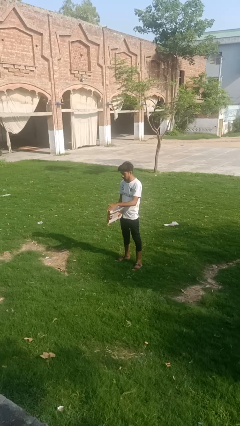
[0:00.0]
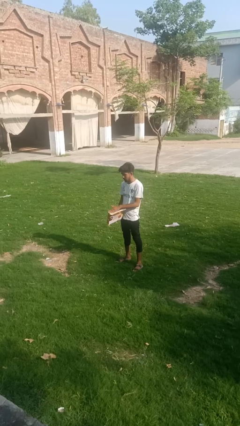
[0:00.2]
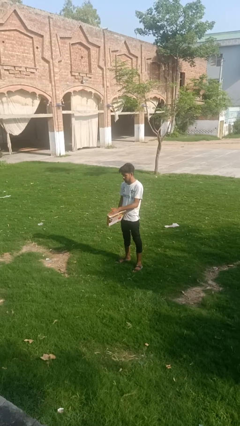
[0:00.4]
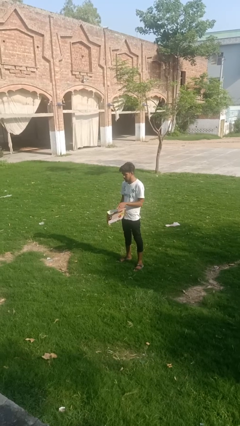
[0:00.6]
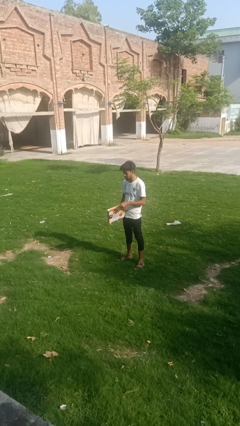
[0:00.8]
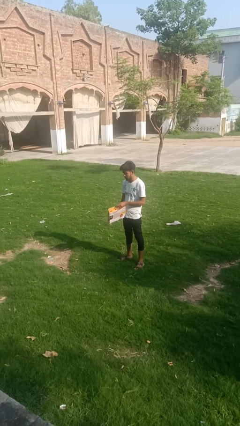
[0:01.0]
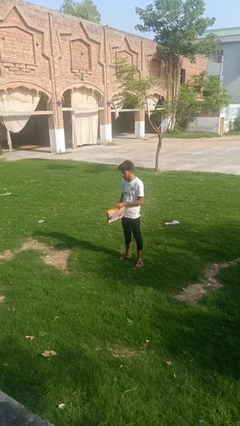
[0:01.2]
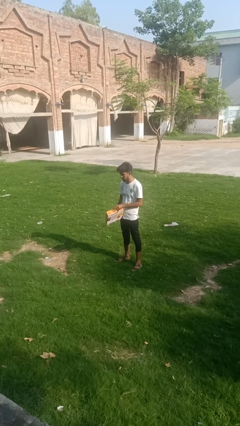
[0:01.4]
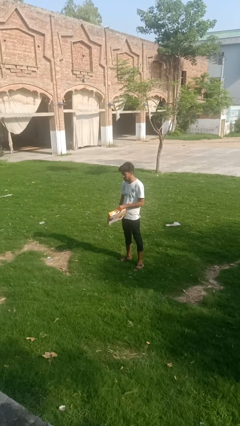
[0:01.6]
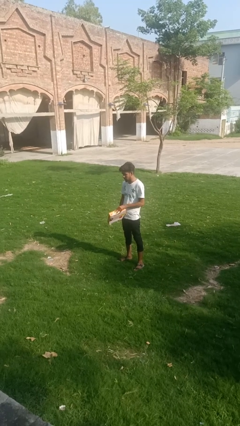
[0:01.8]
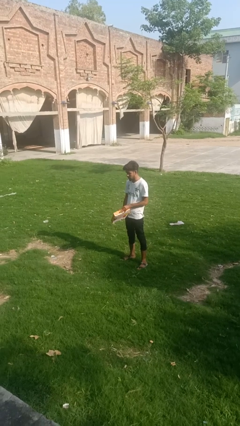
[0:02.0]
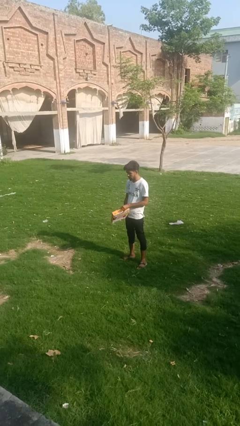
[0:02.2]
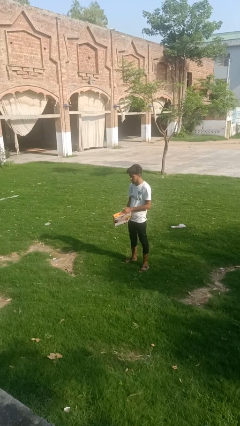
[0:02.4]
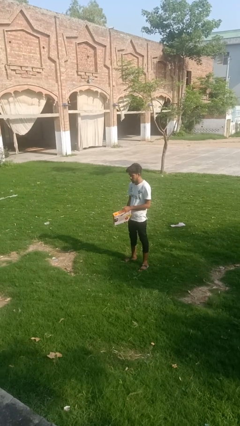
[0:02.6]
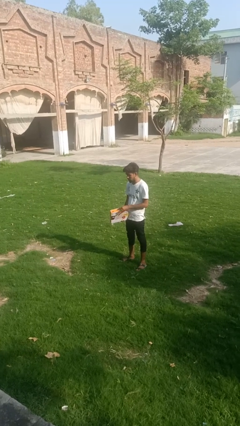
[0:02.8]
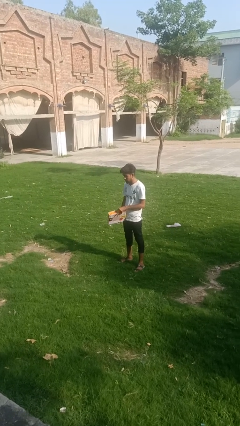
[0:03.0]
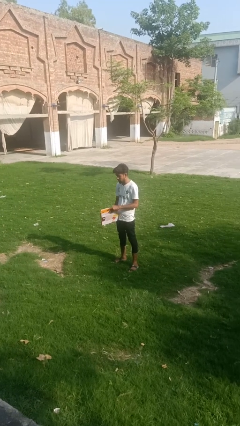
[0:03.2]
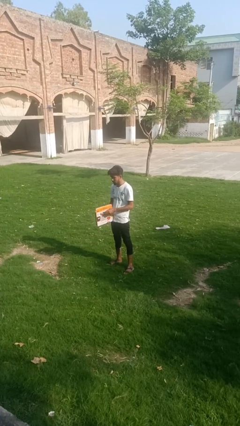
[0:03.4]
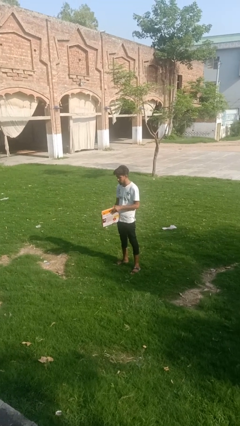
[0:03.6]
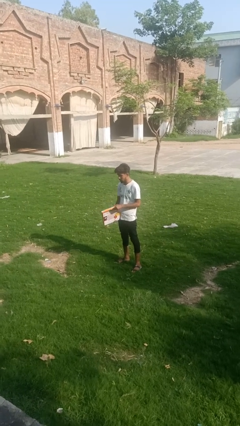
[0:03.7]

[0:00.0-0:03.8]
person closes mailbox

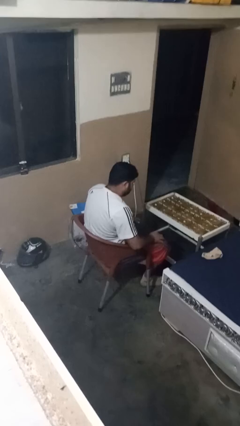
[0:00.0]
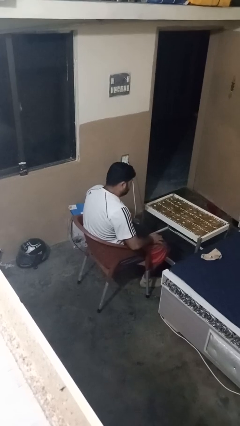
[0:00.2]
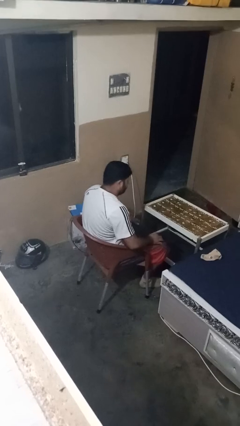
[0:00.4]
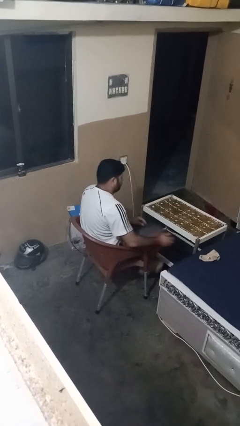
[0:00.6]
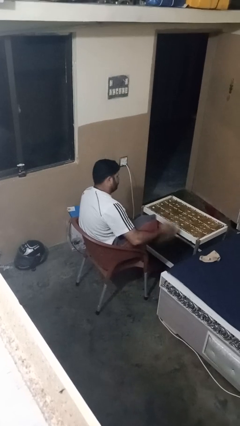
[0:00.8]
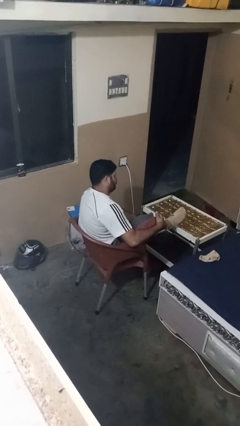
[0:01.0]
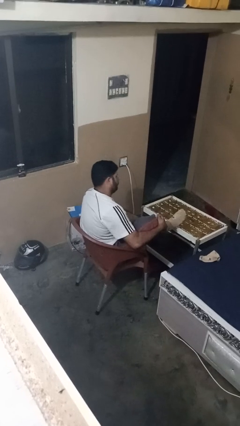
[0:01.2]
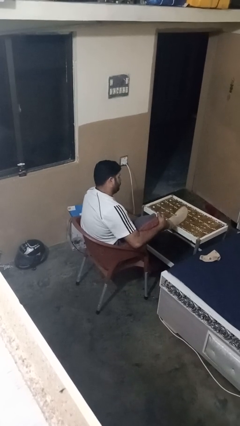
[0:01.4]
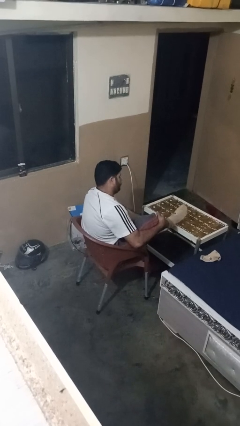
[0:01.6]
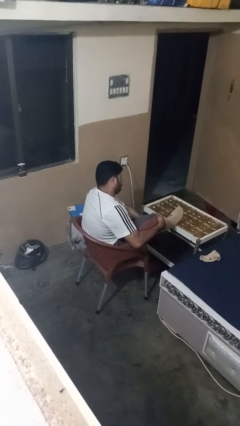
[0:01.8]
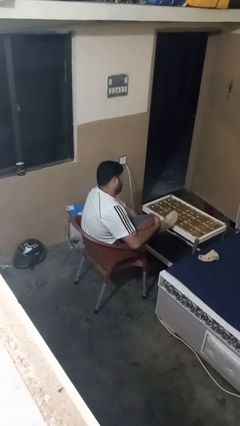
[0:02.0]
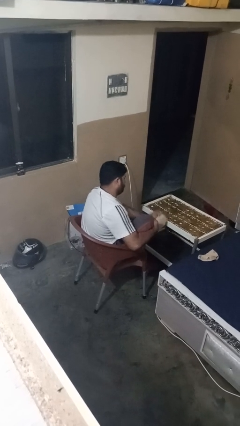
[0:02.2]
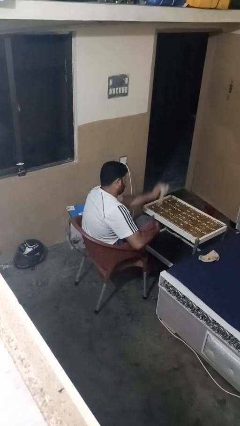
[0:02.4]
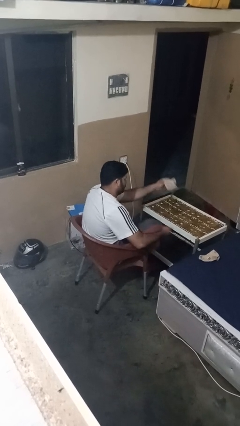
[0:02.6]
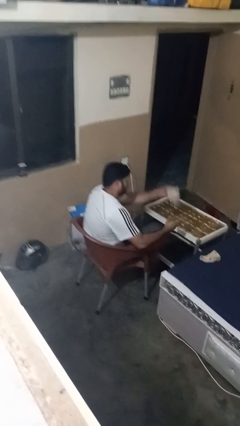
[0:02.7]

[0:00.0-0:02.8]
person takes off socks

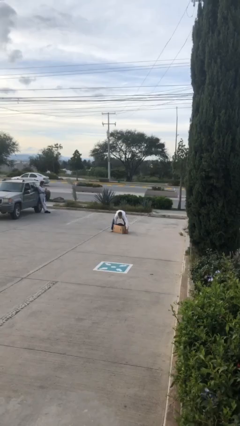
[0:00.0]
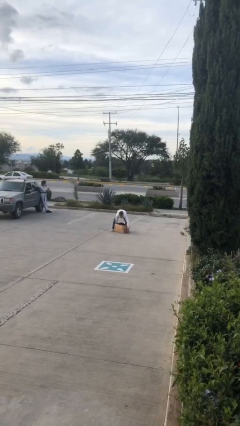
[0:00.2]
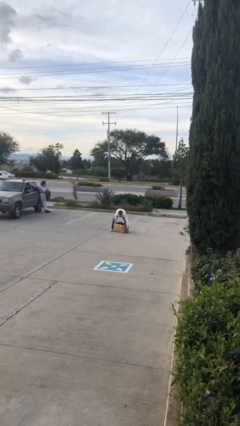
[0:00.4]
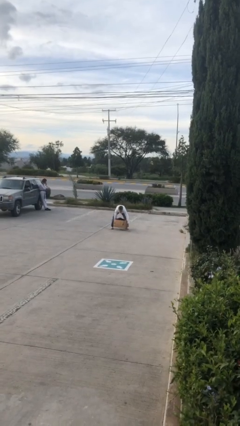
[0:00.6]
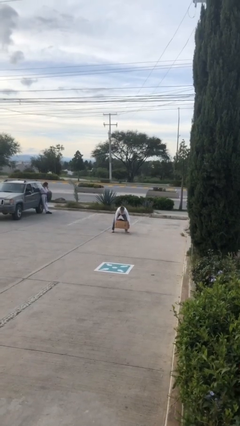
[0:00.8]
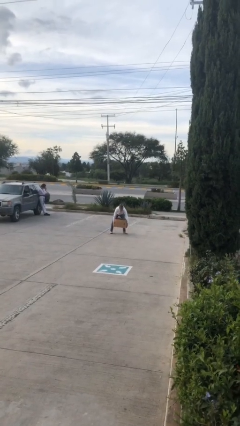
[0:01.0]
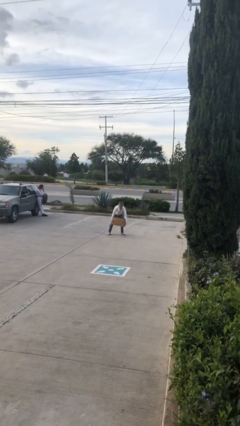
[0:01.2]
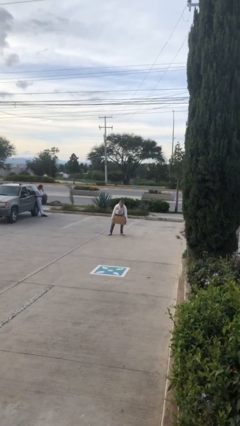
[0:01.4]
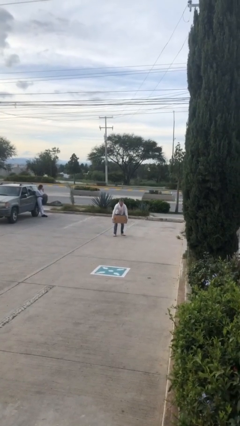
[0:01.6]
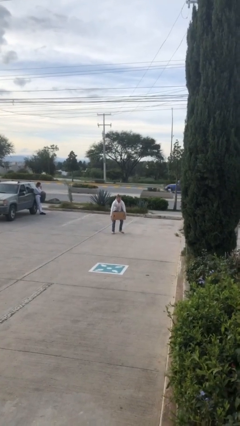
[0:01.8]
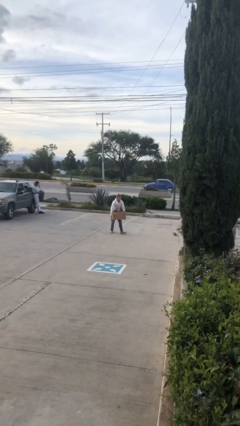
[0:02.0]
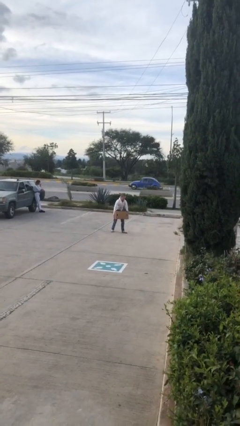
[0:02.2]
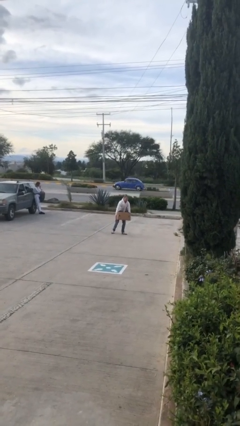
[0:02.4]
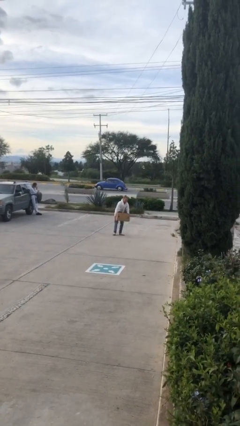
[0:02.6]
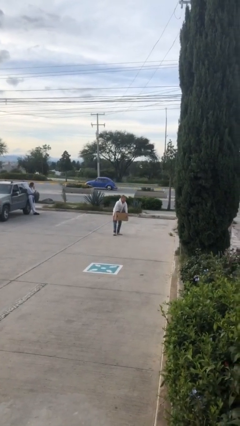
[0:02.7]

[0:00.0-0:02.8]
person carries heavy object

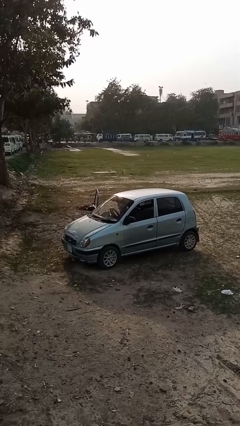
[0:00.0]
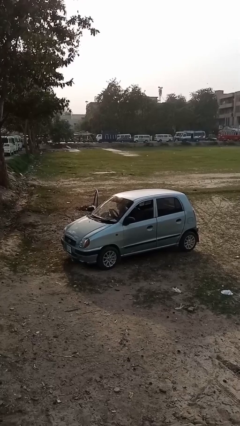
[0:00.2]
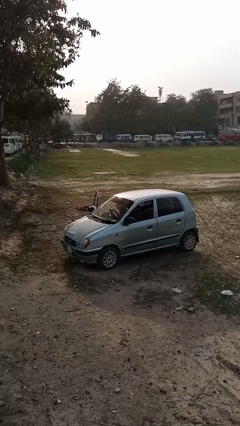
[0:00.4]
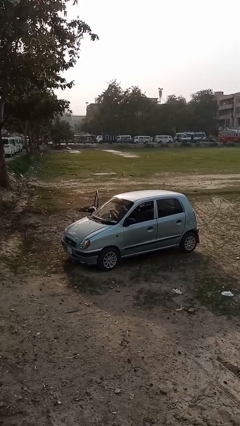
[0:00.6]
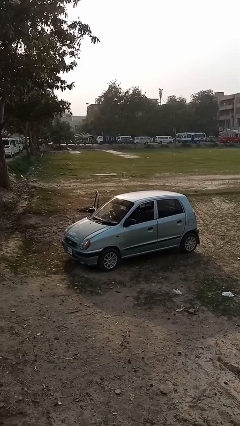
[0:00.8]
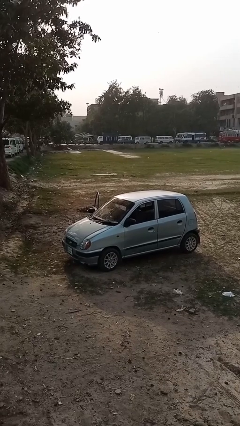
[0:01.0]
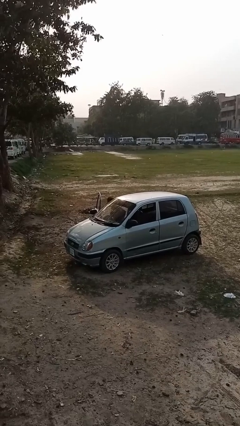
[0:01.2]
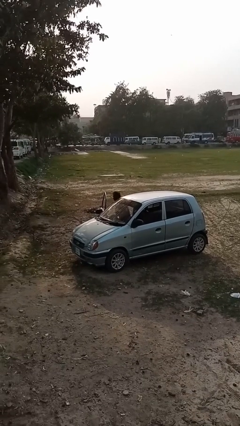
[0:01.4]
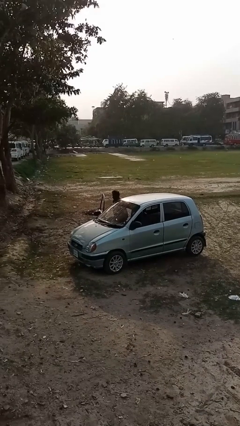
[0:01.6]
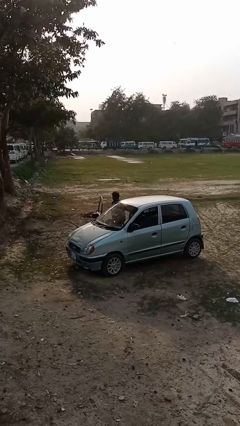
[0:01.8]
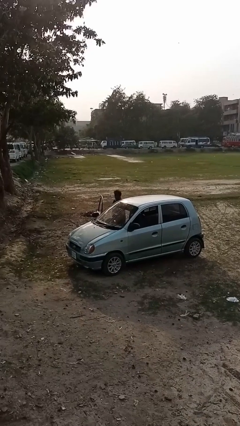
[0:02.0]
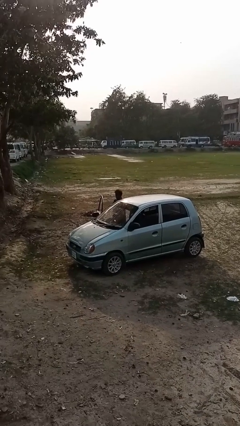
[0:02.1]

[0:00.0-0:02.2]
person exits car

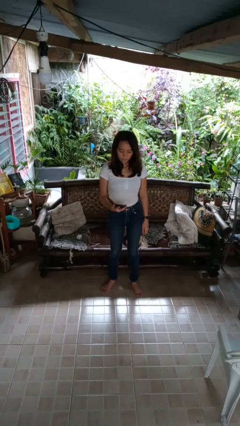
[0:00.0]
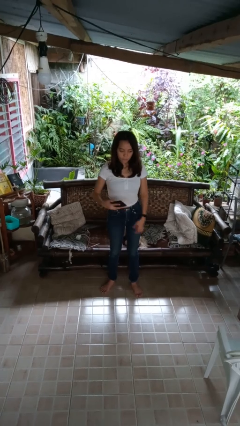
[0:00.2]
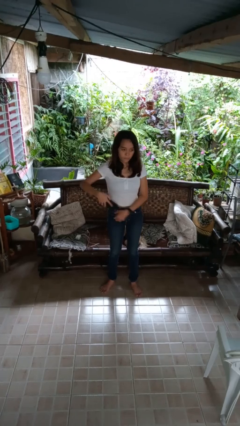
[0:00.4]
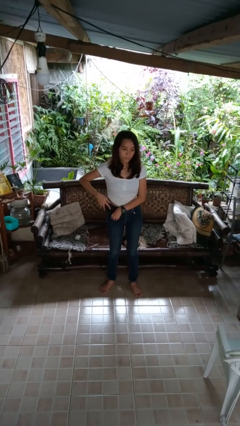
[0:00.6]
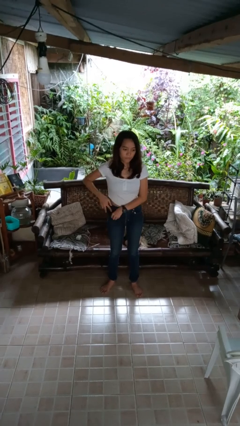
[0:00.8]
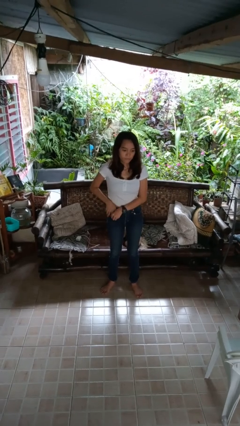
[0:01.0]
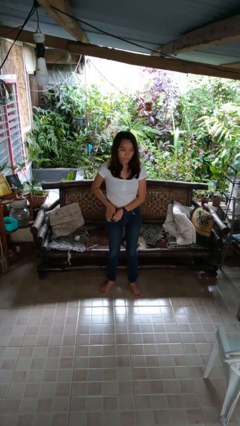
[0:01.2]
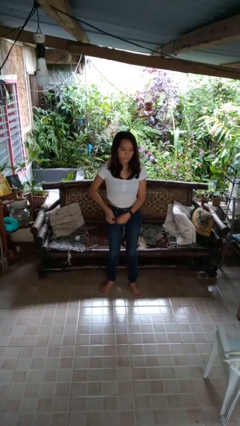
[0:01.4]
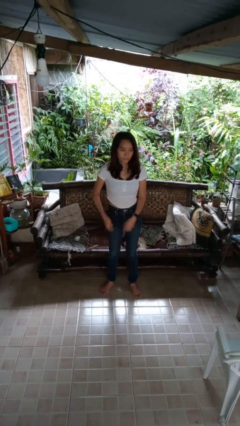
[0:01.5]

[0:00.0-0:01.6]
person puts phone into pocket

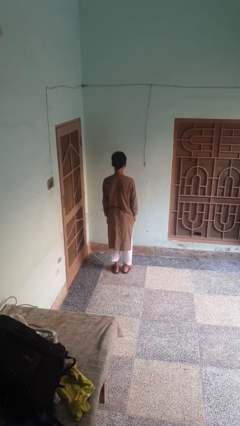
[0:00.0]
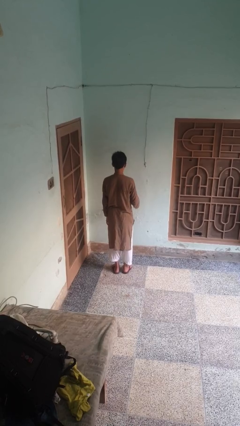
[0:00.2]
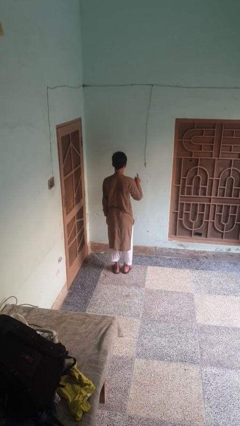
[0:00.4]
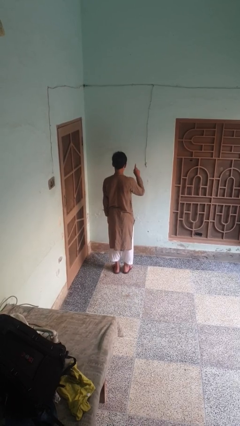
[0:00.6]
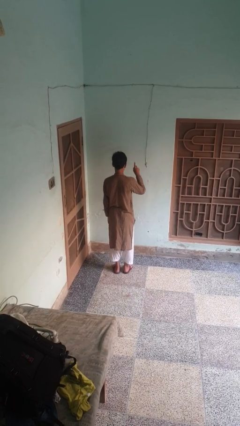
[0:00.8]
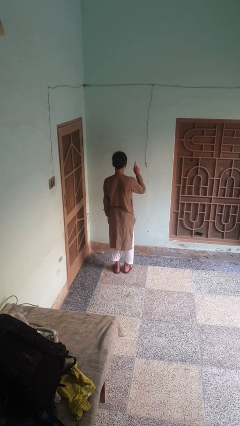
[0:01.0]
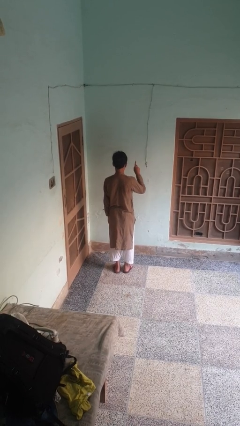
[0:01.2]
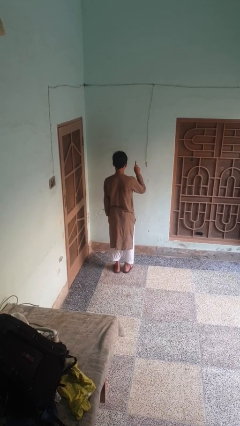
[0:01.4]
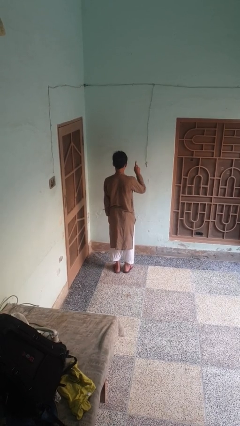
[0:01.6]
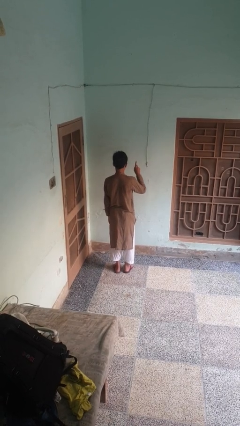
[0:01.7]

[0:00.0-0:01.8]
person gestures number one

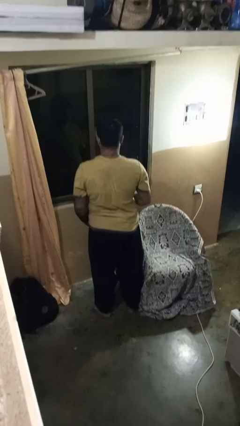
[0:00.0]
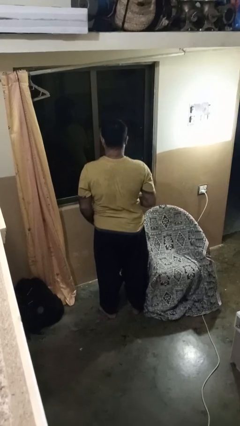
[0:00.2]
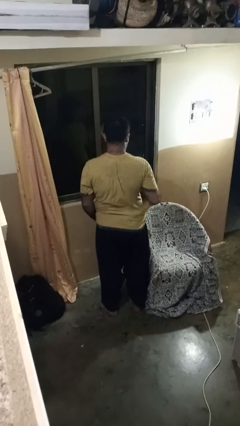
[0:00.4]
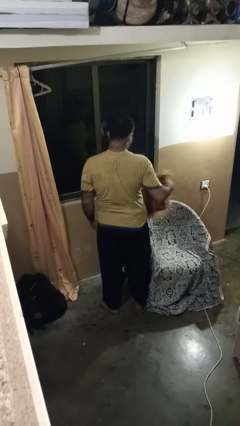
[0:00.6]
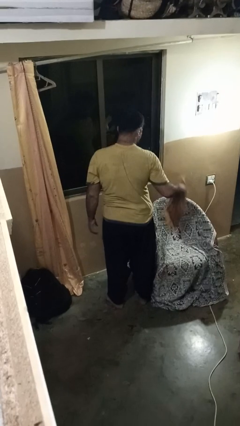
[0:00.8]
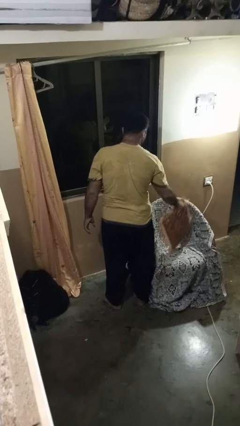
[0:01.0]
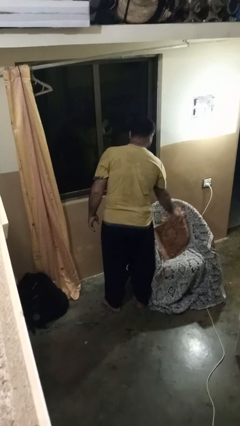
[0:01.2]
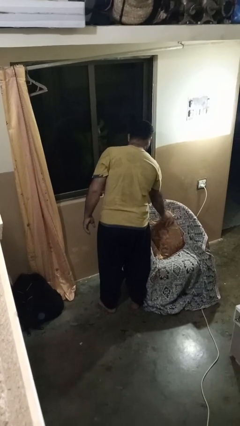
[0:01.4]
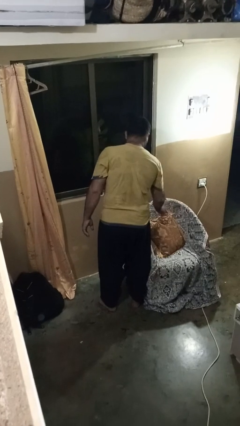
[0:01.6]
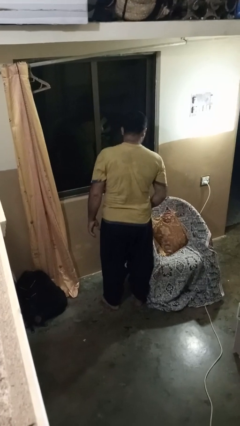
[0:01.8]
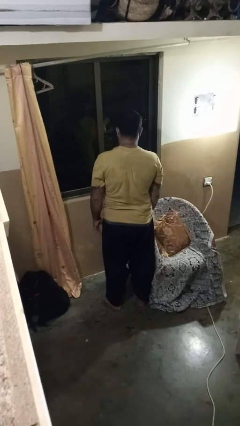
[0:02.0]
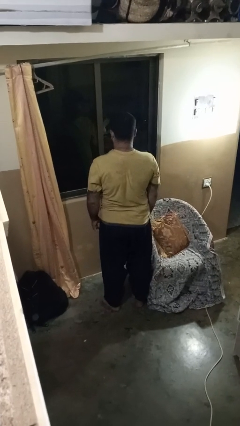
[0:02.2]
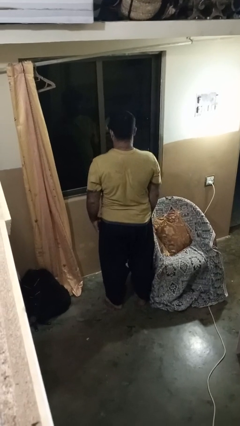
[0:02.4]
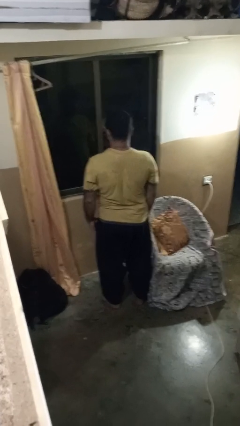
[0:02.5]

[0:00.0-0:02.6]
person puts down object on couch
